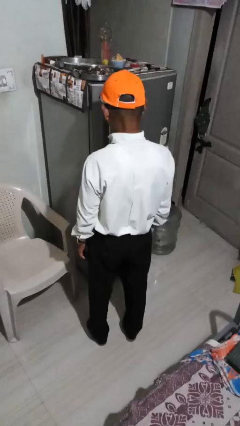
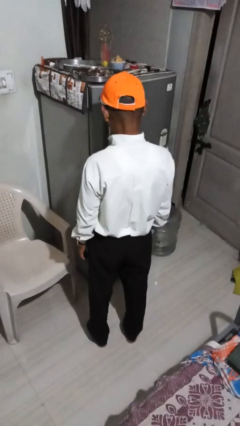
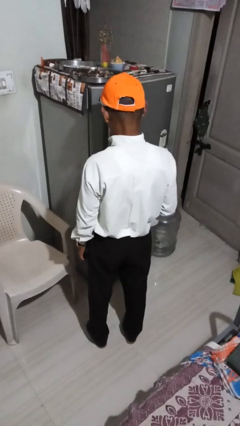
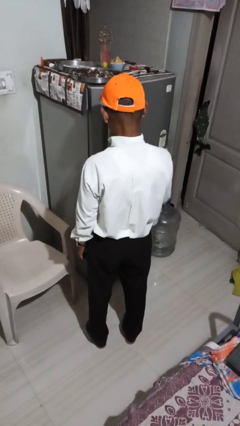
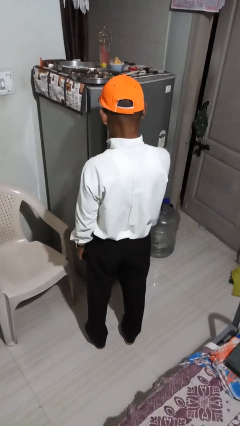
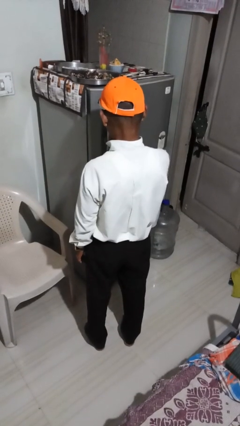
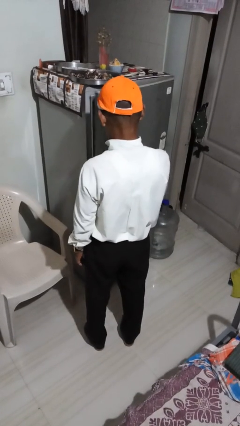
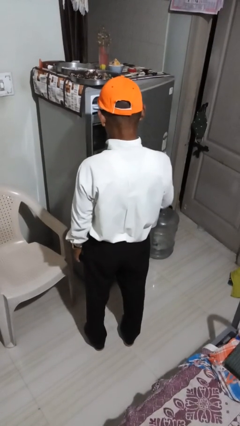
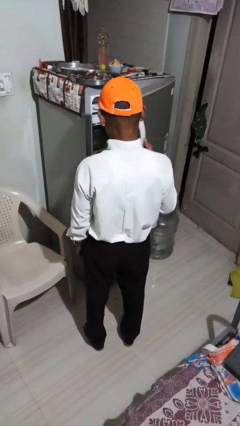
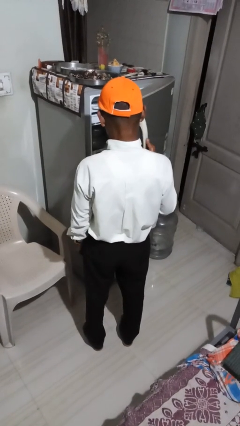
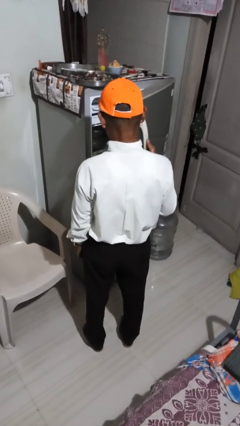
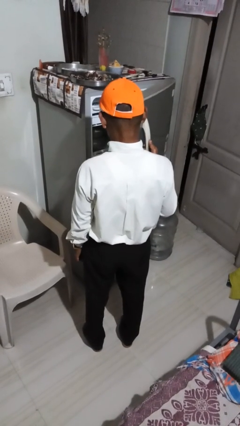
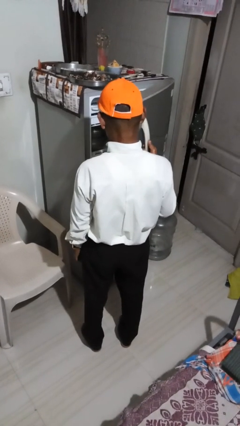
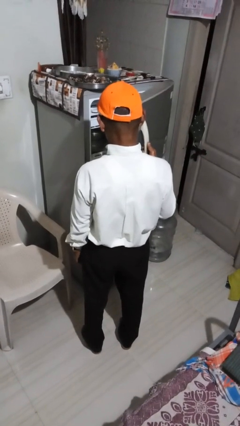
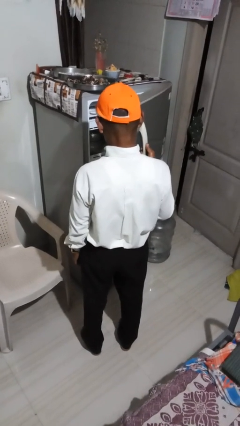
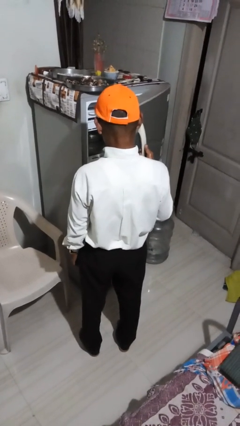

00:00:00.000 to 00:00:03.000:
person opens clothes washer

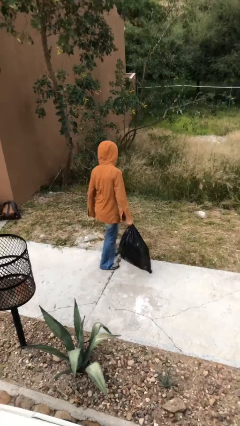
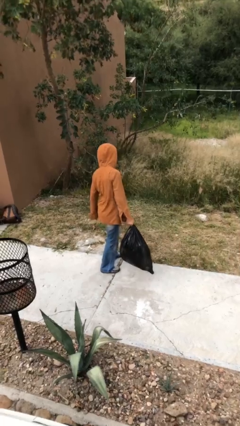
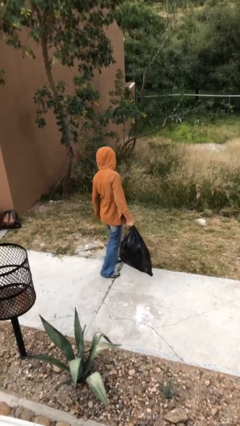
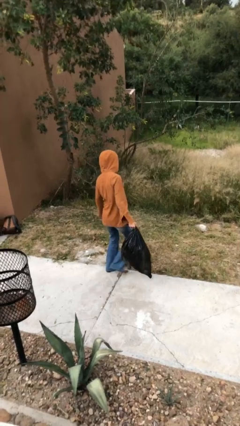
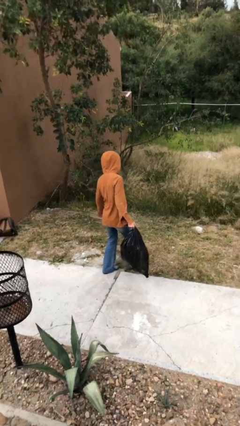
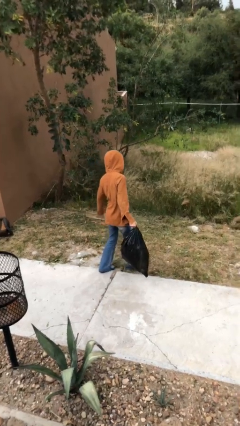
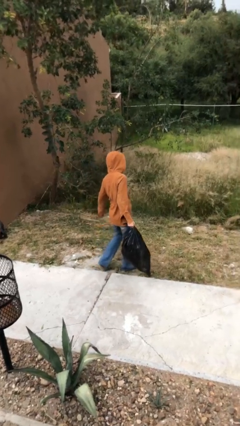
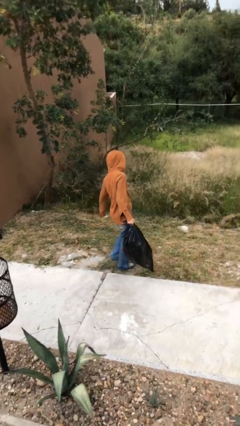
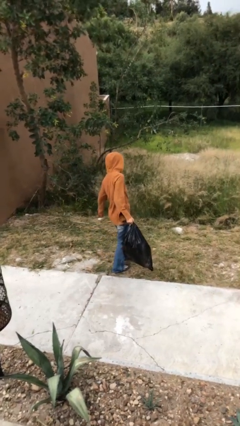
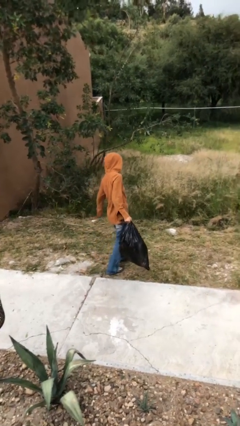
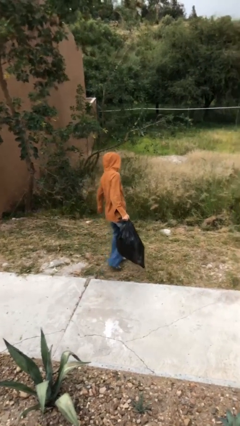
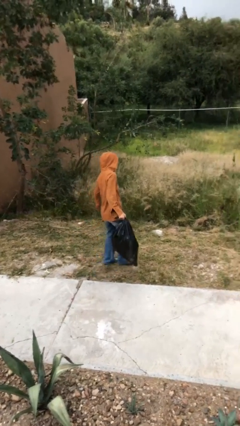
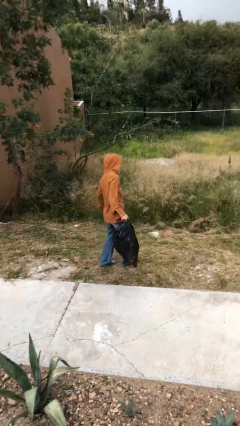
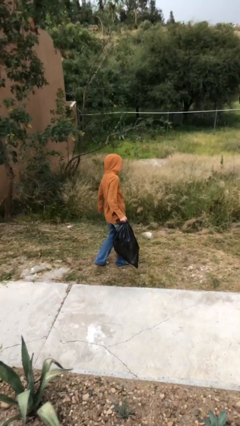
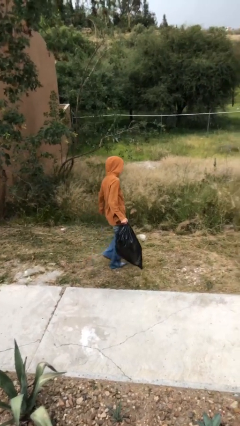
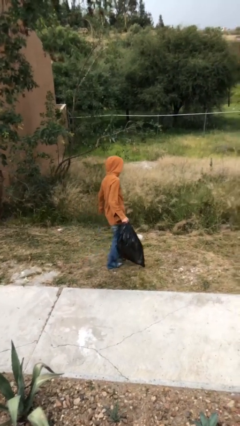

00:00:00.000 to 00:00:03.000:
person carries heavy object

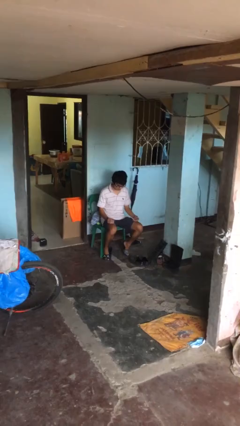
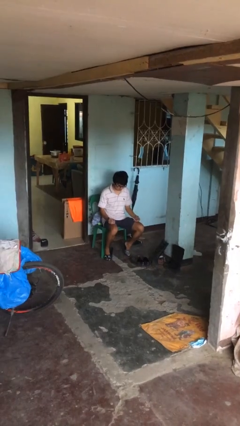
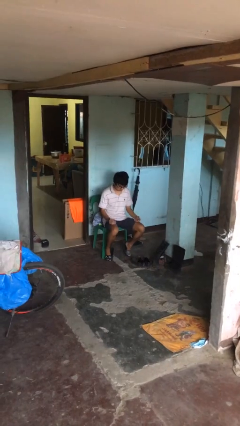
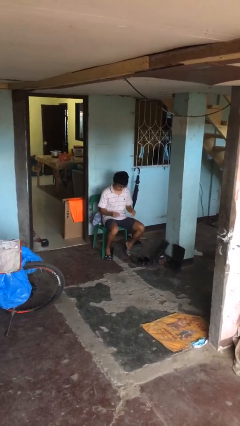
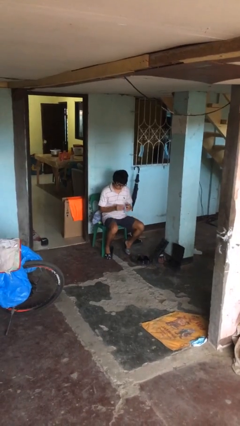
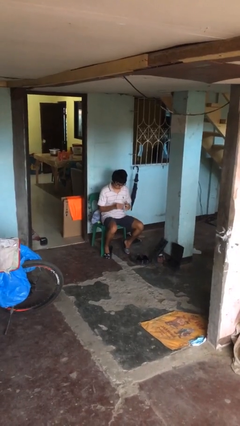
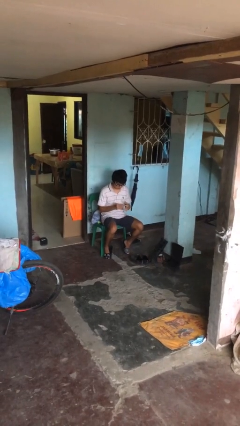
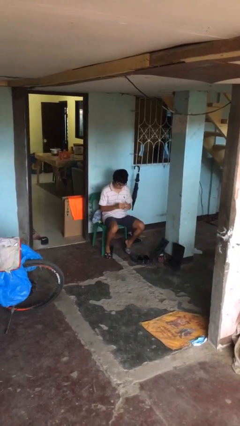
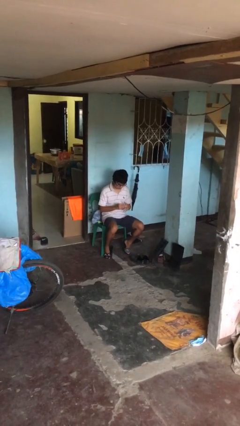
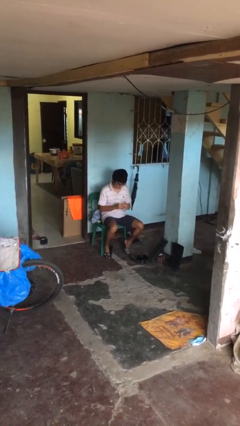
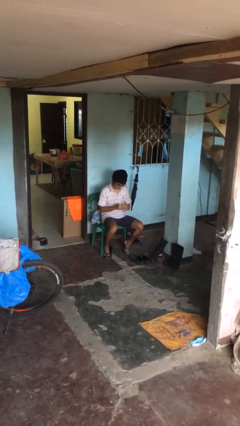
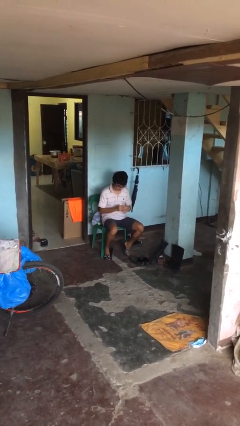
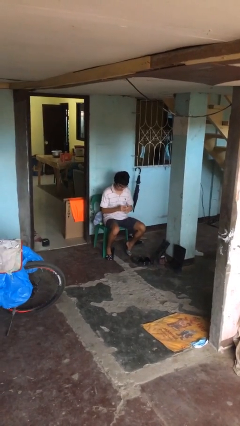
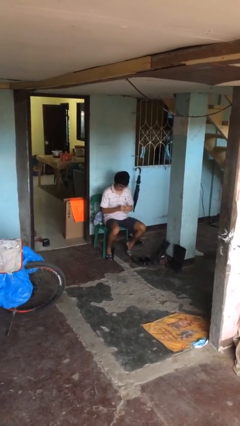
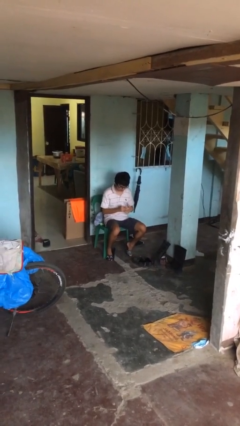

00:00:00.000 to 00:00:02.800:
person puts on ring

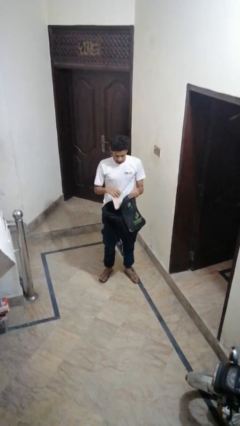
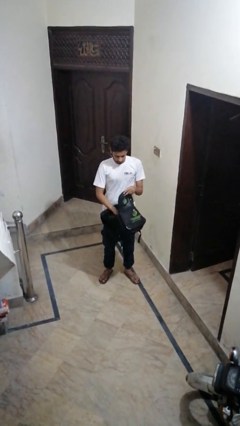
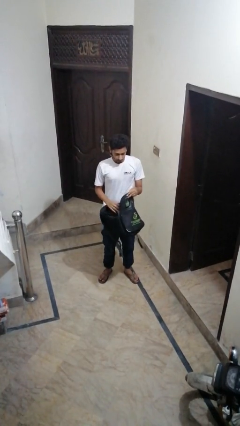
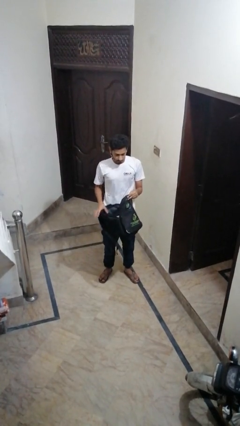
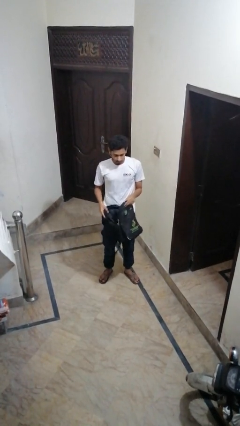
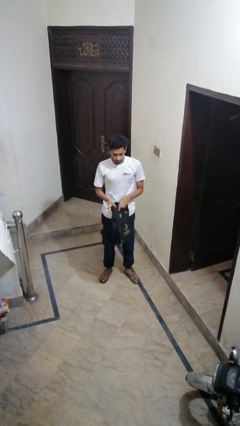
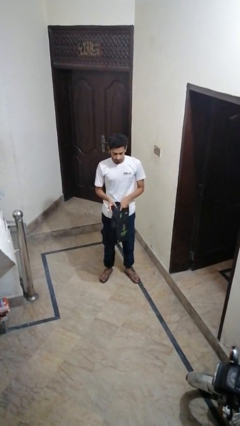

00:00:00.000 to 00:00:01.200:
person puts object into backpack

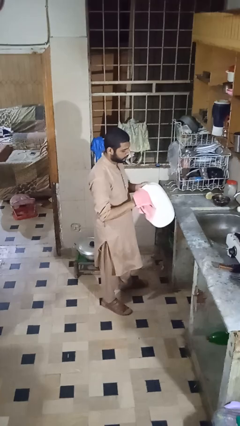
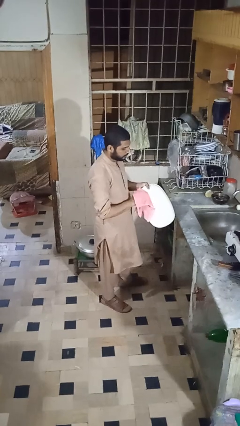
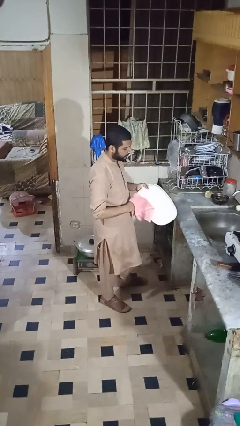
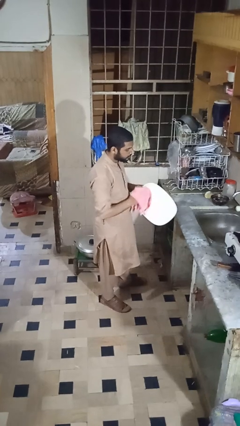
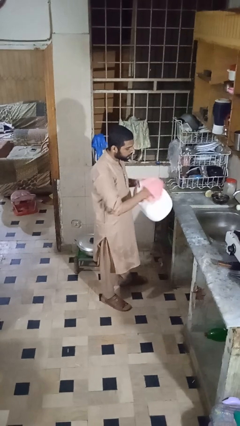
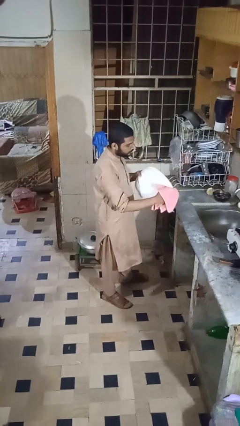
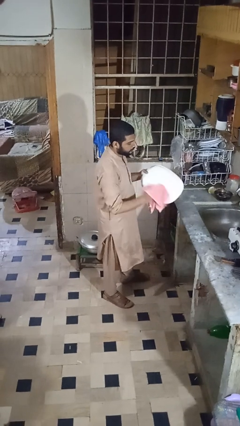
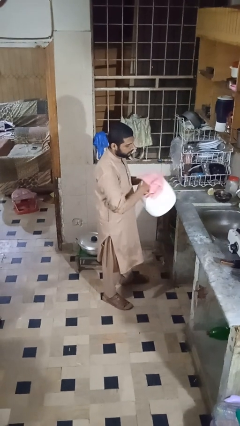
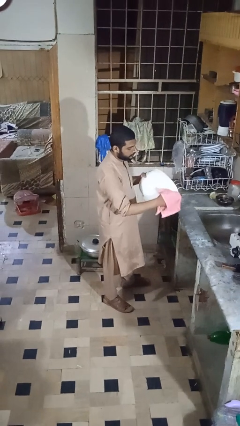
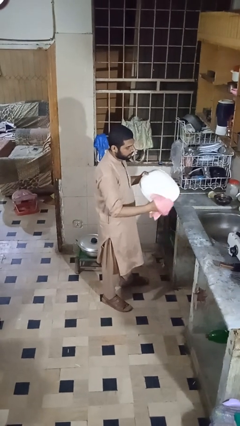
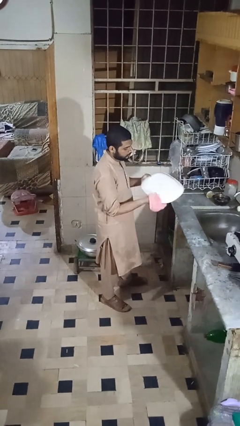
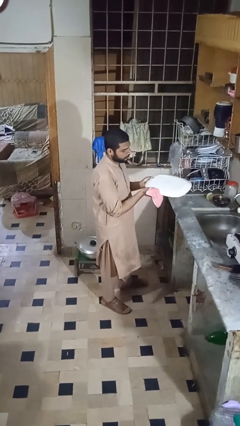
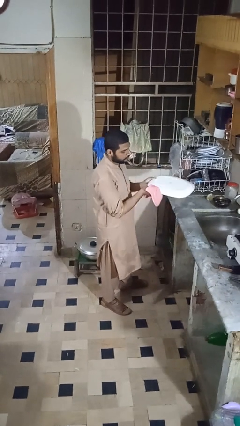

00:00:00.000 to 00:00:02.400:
person dries dish

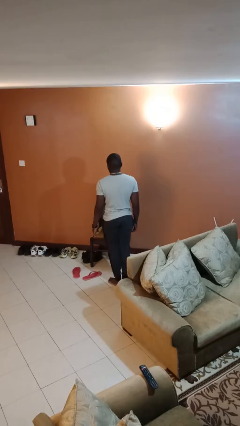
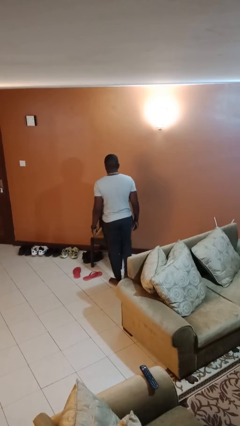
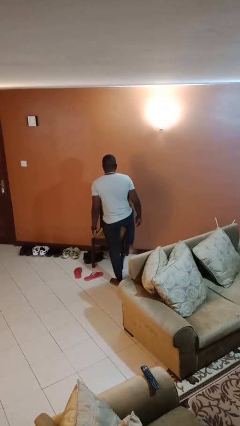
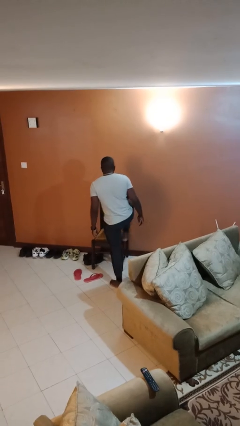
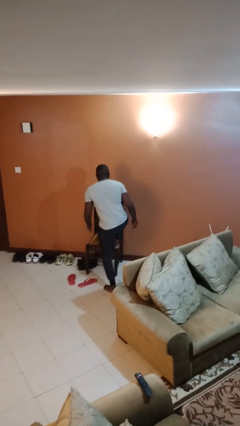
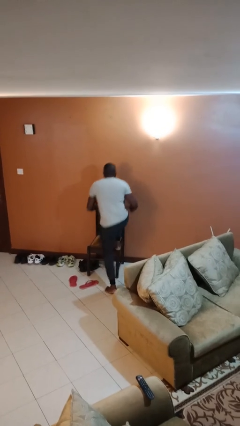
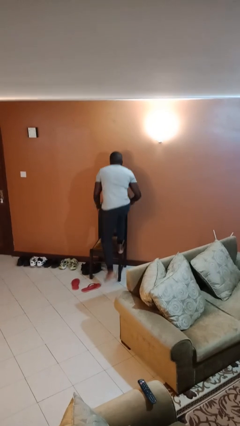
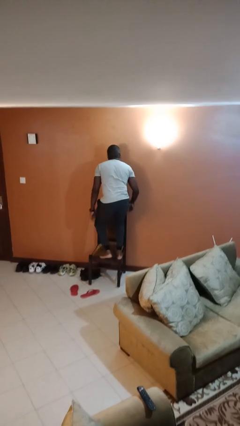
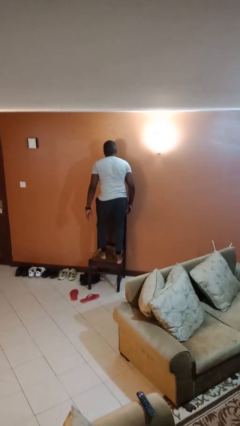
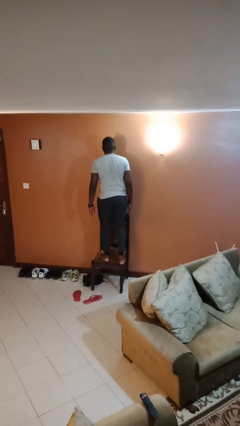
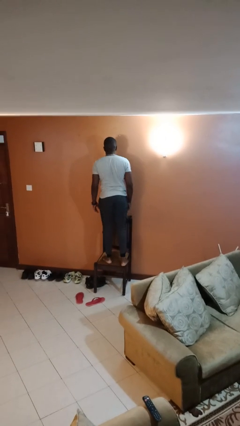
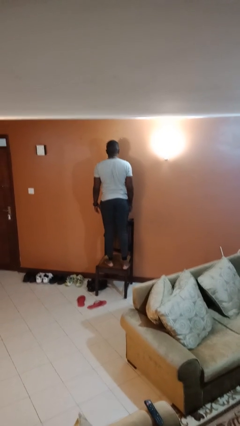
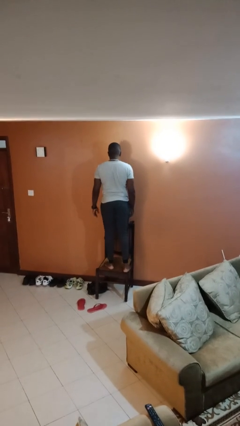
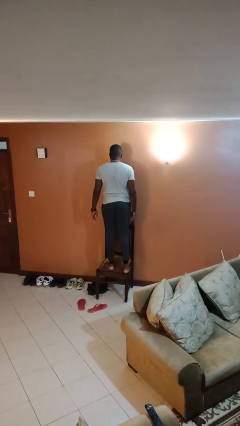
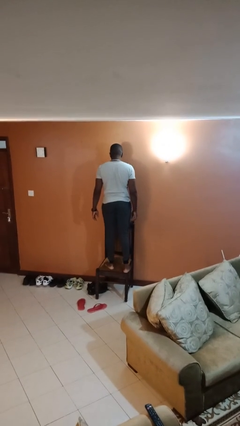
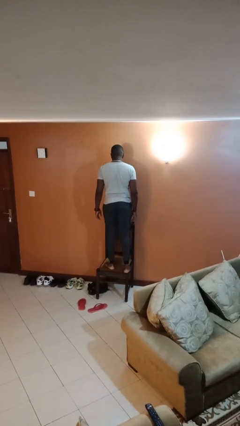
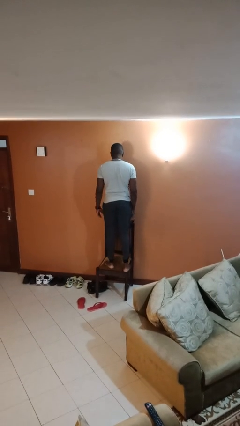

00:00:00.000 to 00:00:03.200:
person climbs on chair

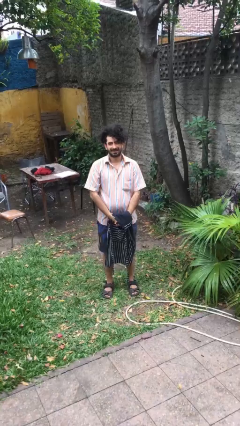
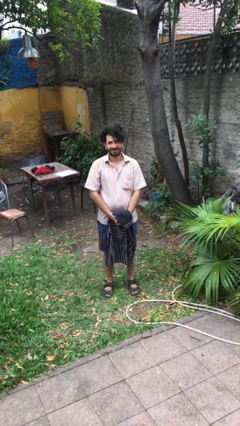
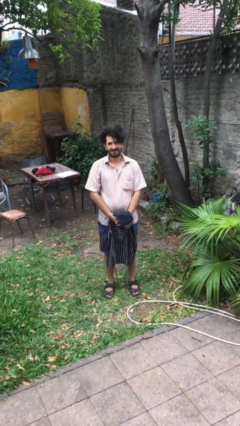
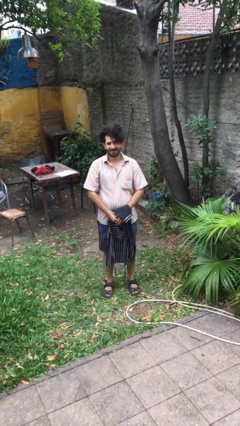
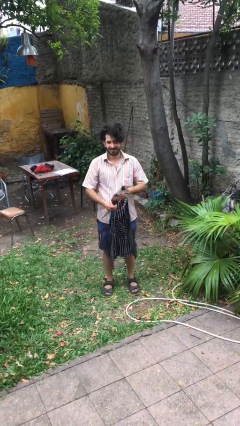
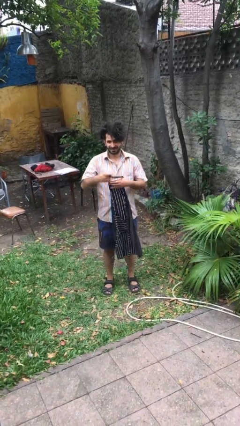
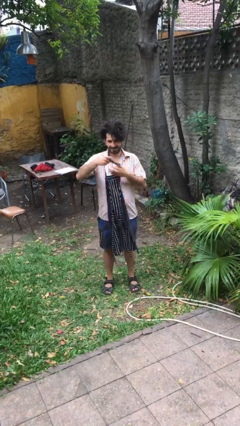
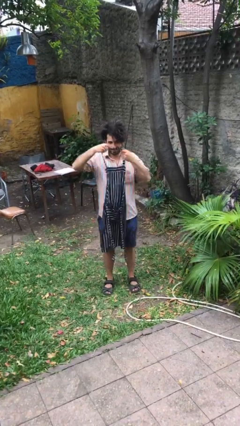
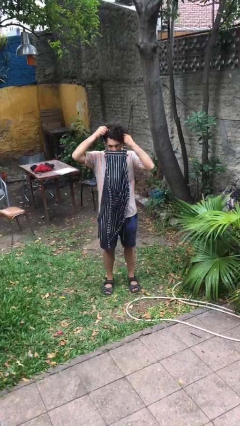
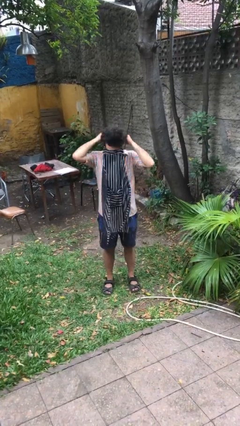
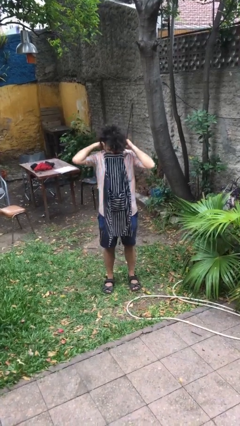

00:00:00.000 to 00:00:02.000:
person puts on apron
